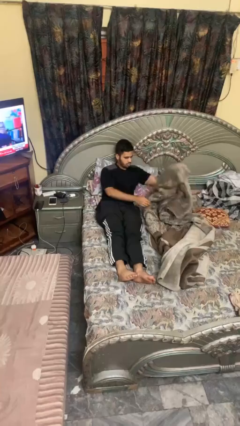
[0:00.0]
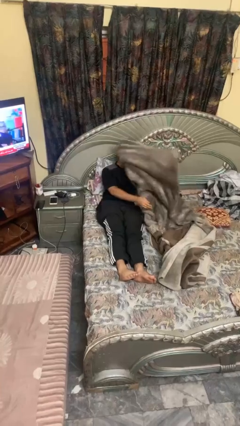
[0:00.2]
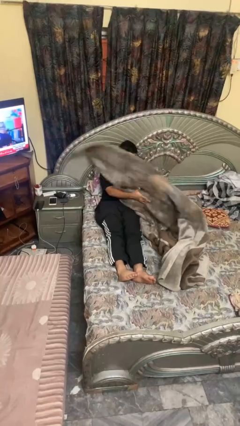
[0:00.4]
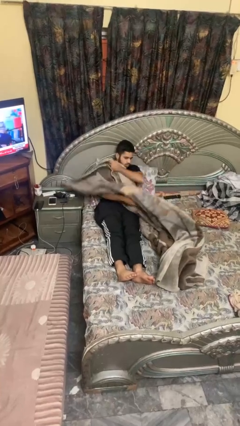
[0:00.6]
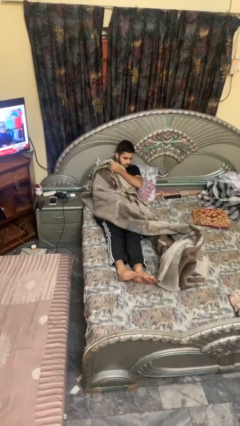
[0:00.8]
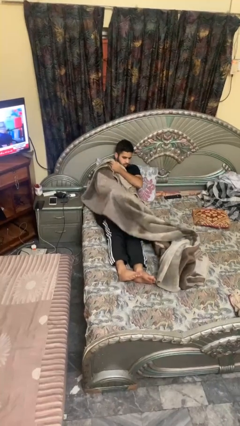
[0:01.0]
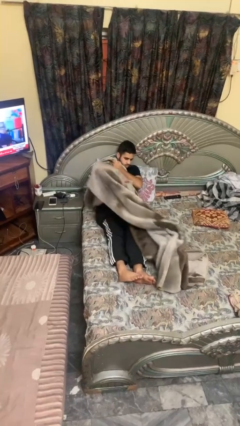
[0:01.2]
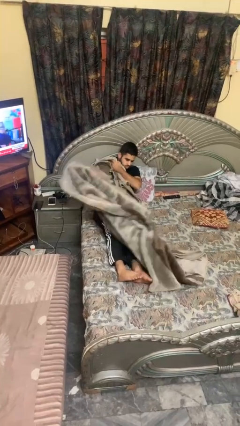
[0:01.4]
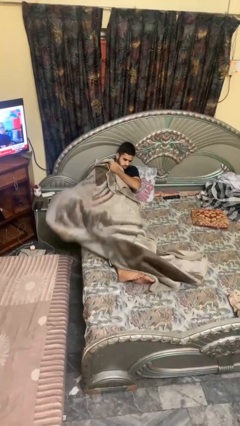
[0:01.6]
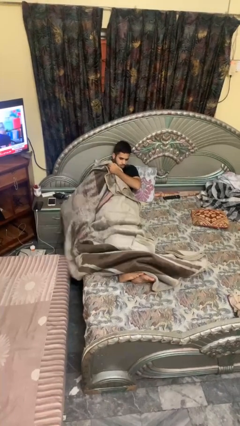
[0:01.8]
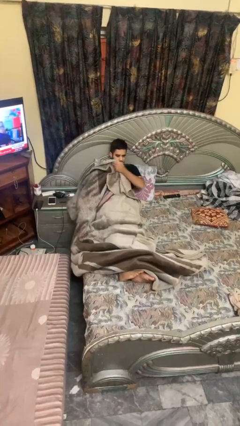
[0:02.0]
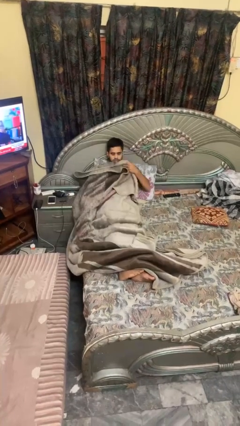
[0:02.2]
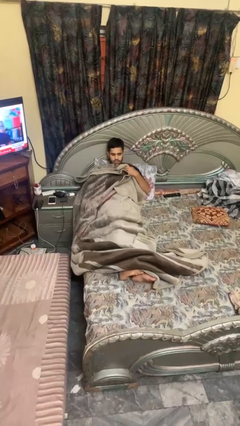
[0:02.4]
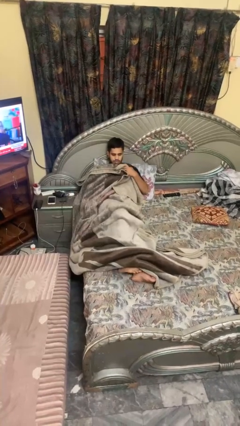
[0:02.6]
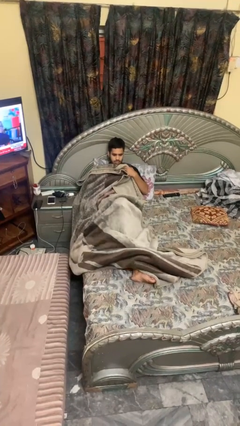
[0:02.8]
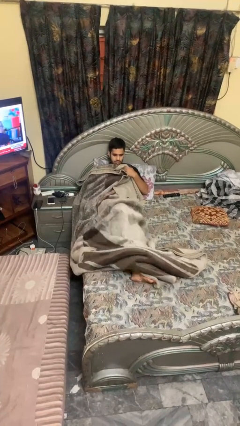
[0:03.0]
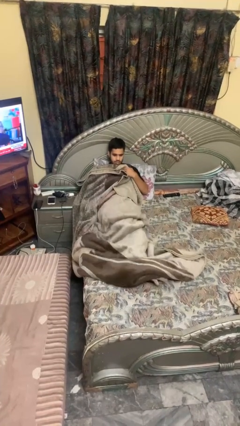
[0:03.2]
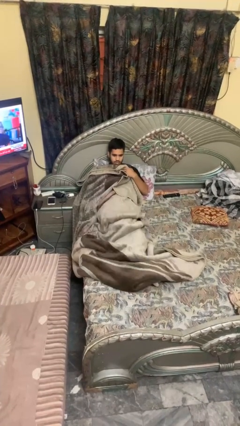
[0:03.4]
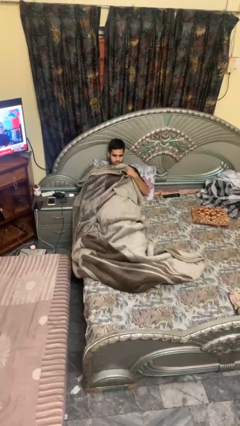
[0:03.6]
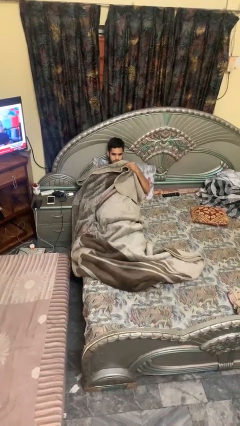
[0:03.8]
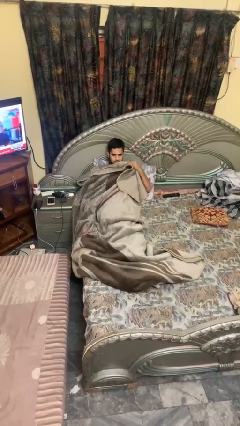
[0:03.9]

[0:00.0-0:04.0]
person covers with blanket

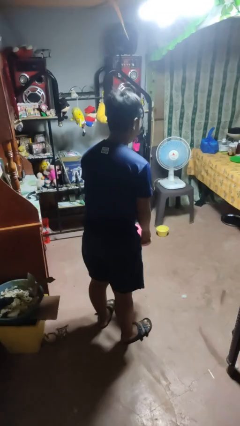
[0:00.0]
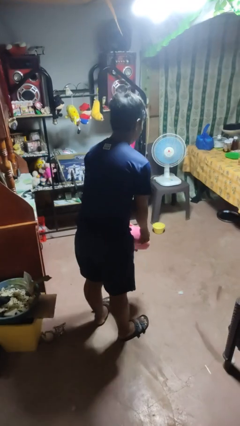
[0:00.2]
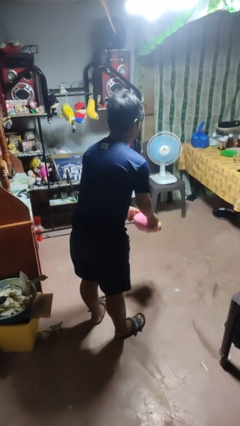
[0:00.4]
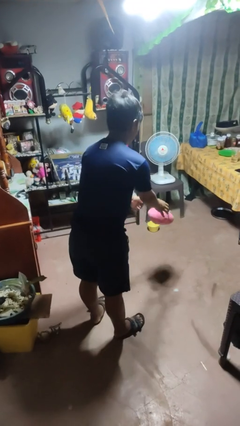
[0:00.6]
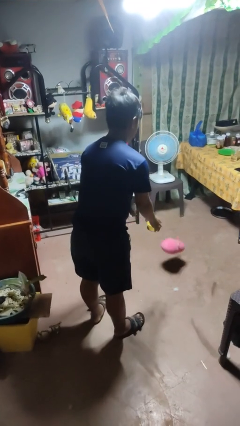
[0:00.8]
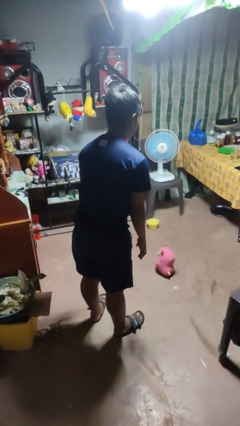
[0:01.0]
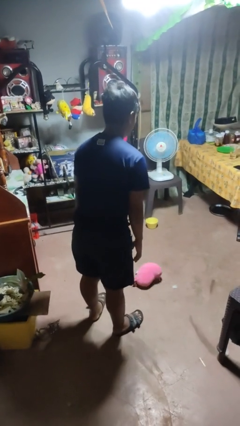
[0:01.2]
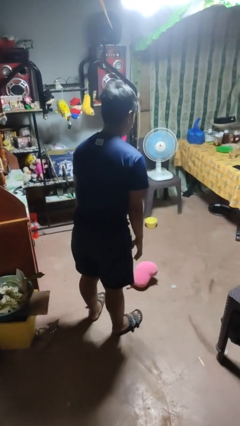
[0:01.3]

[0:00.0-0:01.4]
person throws object into air

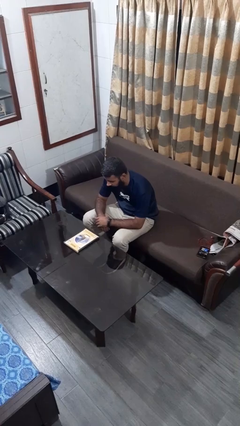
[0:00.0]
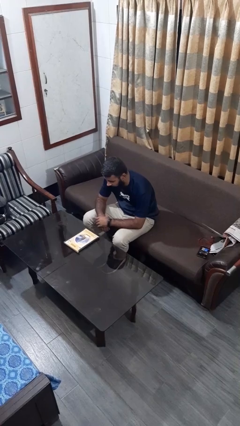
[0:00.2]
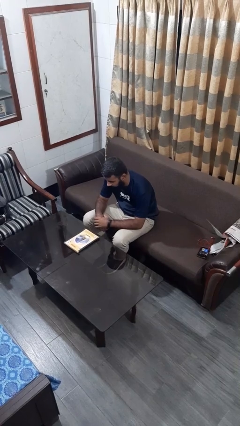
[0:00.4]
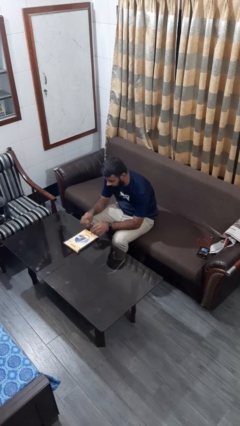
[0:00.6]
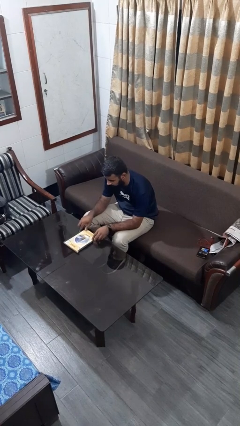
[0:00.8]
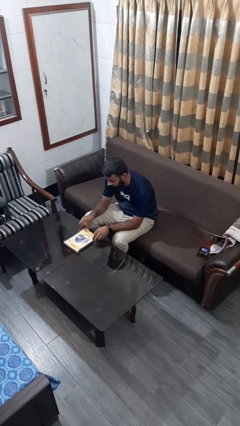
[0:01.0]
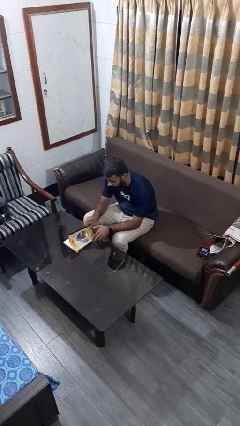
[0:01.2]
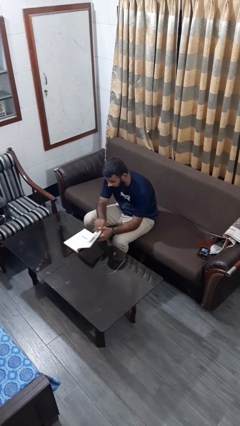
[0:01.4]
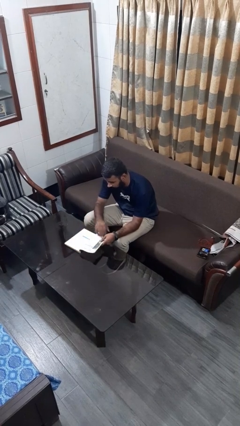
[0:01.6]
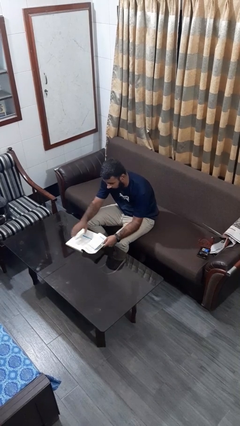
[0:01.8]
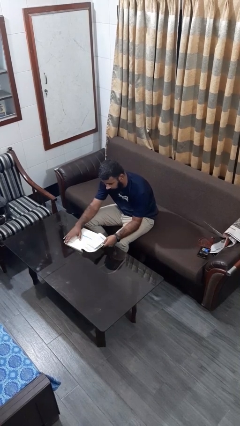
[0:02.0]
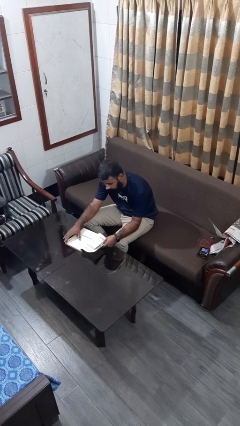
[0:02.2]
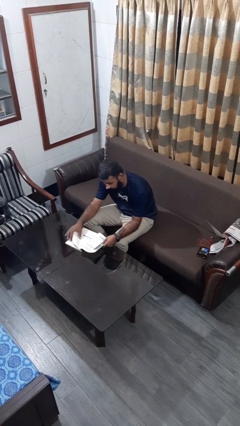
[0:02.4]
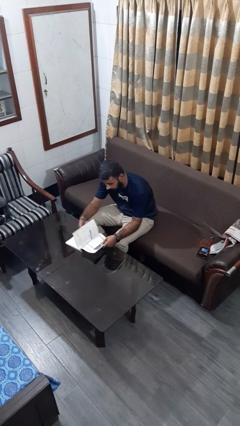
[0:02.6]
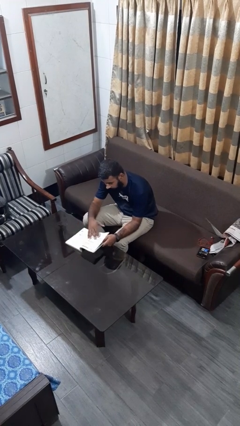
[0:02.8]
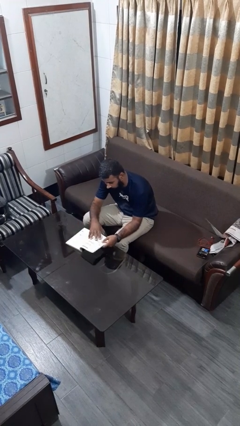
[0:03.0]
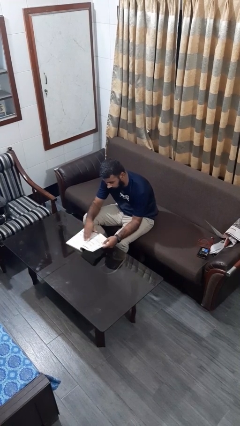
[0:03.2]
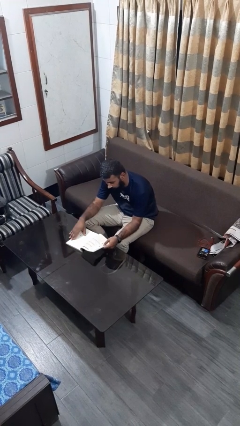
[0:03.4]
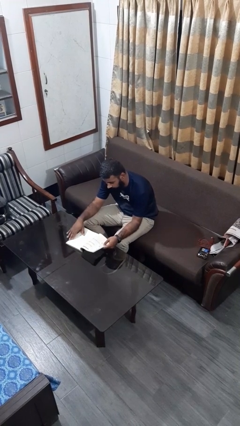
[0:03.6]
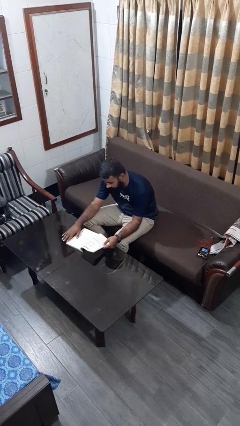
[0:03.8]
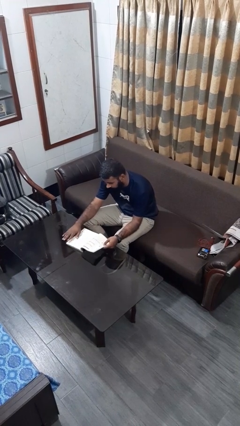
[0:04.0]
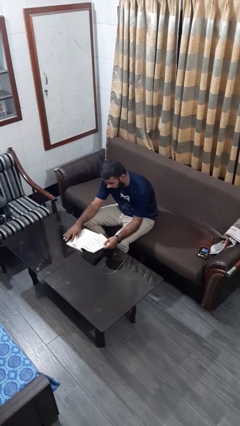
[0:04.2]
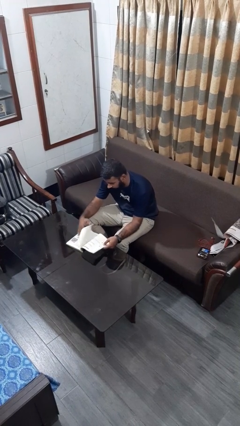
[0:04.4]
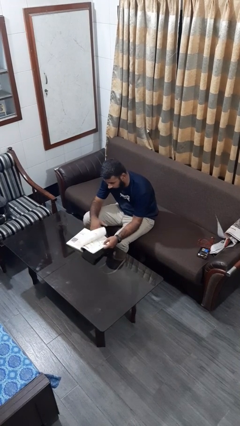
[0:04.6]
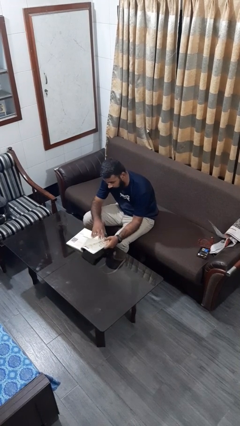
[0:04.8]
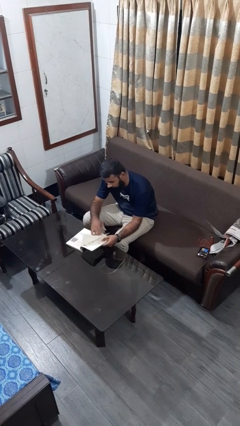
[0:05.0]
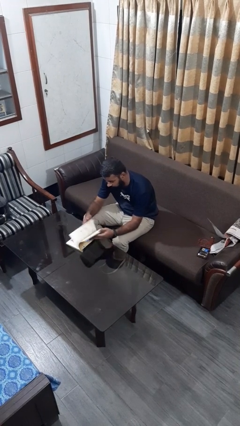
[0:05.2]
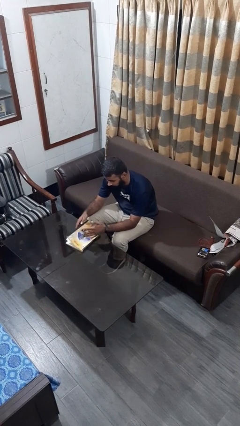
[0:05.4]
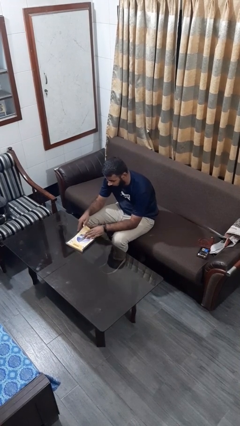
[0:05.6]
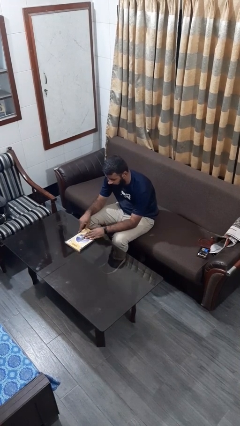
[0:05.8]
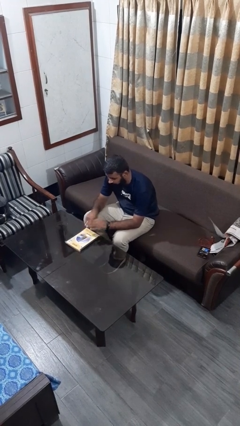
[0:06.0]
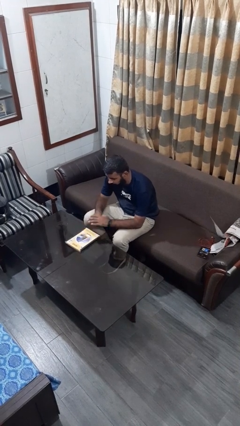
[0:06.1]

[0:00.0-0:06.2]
person reads book

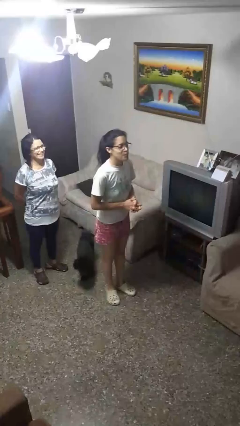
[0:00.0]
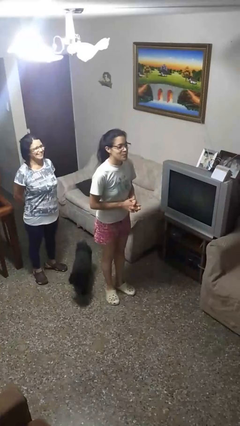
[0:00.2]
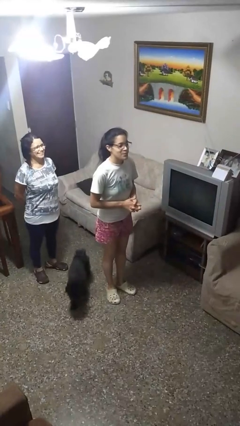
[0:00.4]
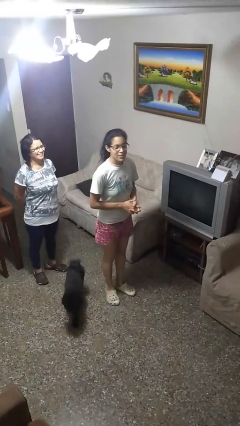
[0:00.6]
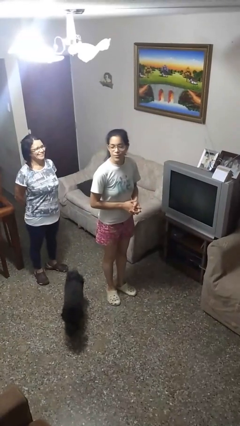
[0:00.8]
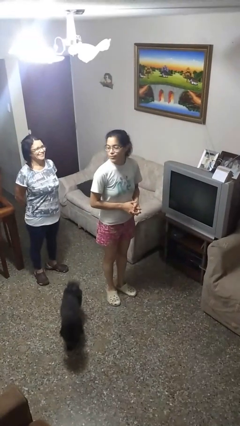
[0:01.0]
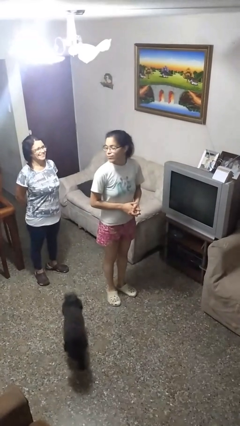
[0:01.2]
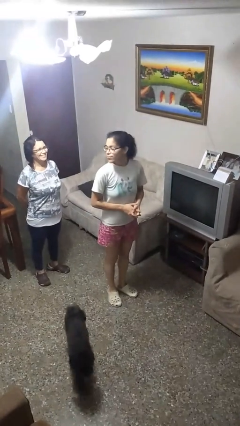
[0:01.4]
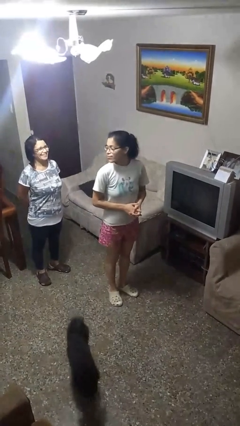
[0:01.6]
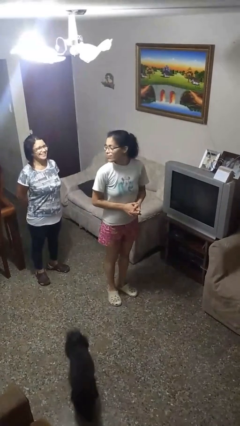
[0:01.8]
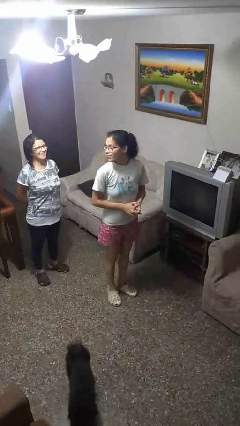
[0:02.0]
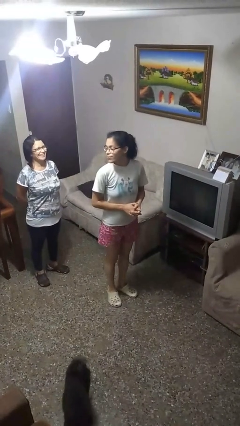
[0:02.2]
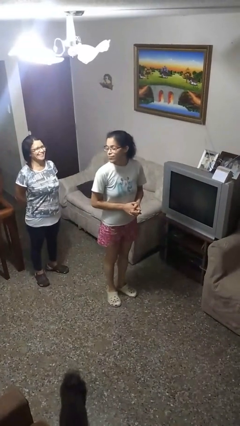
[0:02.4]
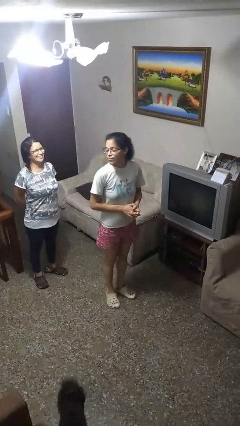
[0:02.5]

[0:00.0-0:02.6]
person looks over shoulder

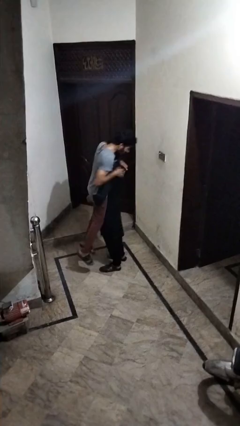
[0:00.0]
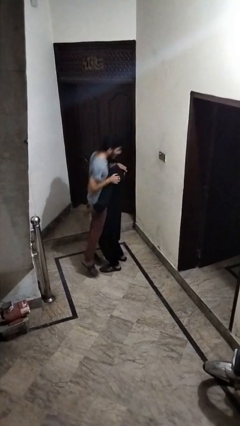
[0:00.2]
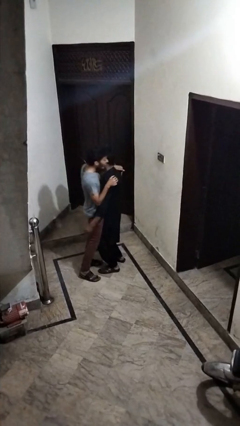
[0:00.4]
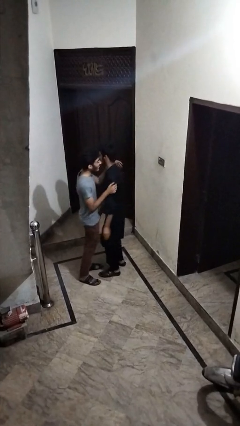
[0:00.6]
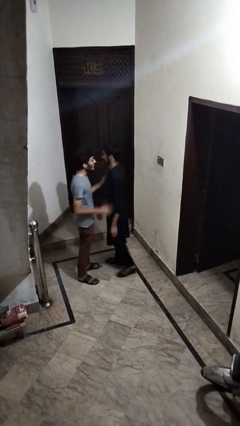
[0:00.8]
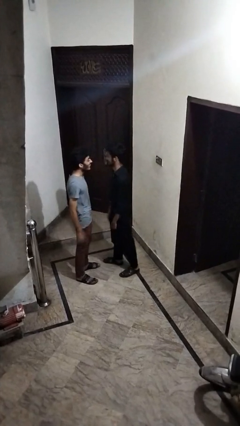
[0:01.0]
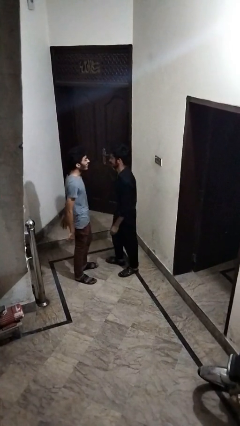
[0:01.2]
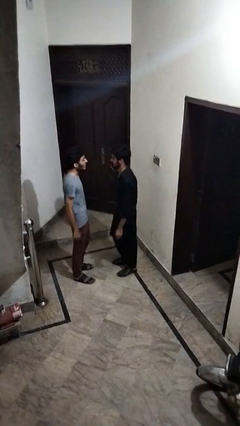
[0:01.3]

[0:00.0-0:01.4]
person puts down person

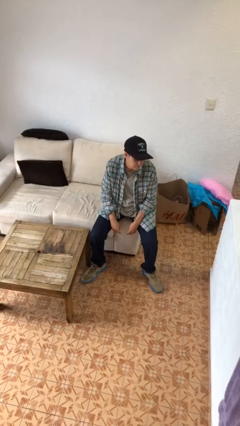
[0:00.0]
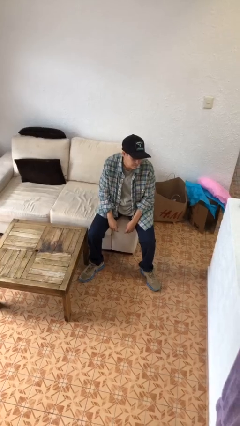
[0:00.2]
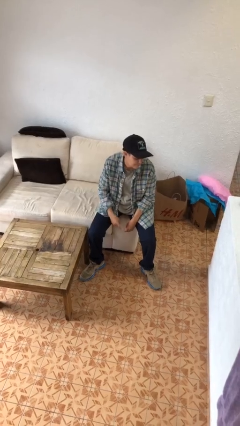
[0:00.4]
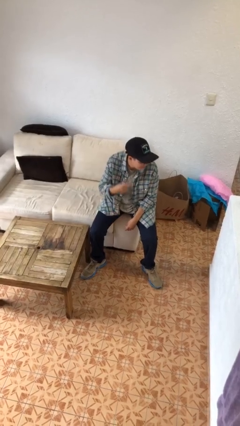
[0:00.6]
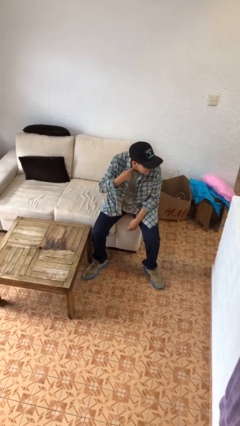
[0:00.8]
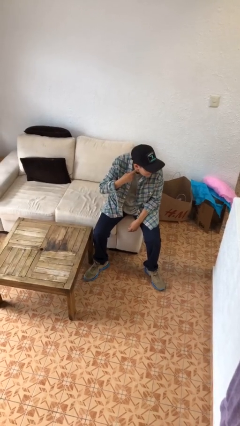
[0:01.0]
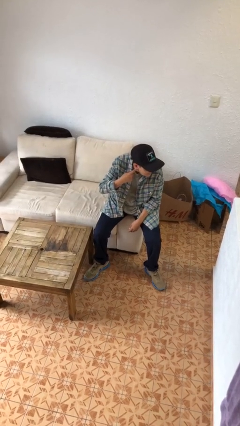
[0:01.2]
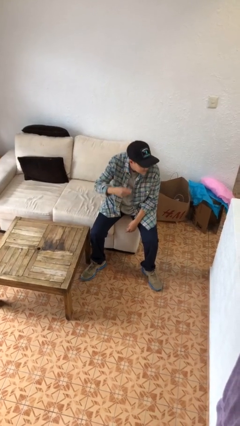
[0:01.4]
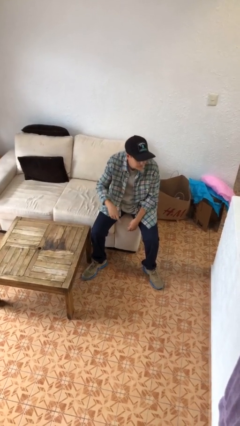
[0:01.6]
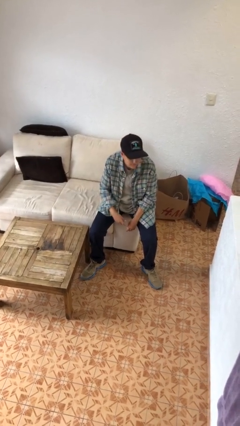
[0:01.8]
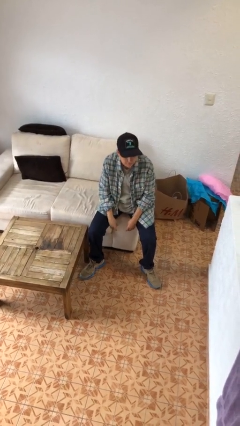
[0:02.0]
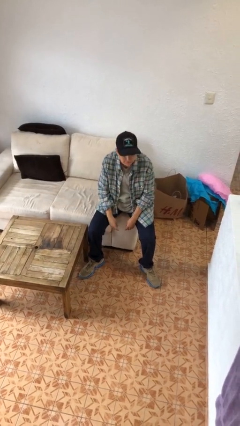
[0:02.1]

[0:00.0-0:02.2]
person gestures listen closely
